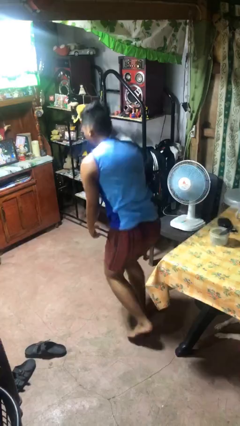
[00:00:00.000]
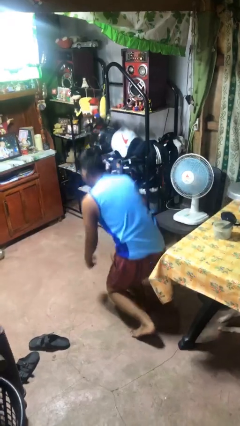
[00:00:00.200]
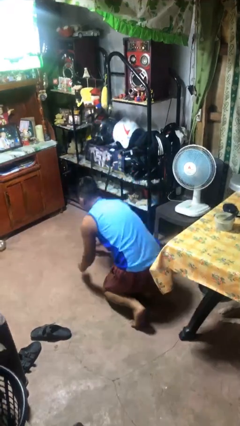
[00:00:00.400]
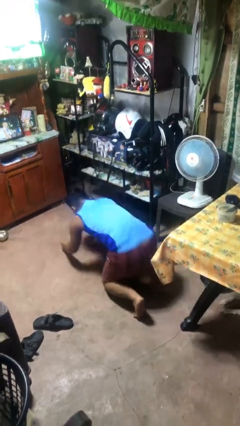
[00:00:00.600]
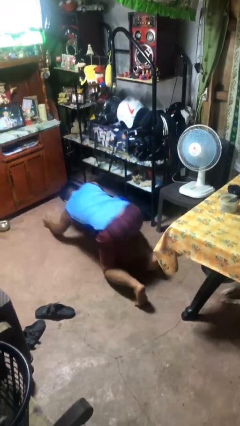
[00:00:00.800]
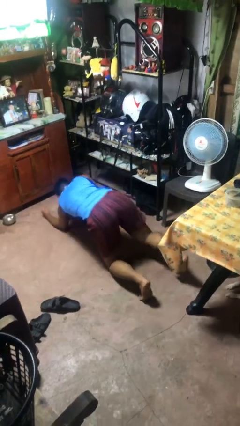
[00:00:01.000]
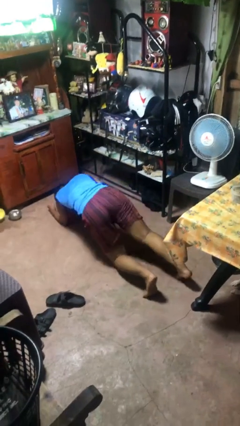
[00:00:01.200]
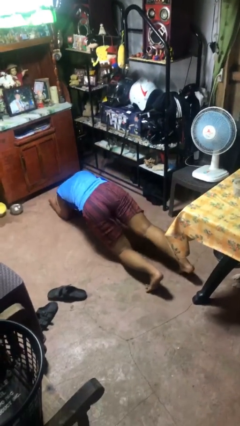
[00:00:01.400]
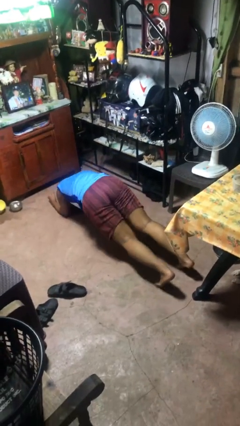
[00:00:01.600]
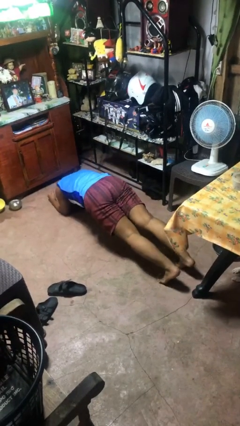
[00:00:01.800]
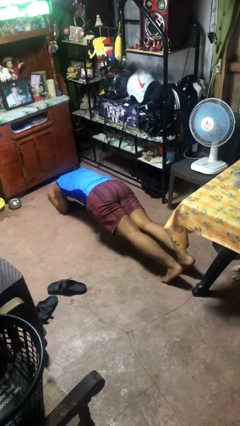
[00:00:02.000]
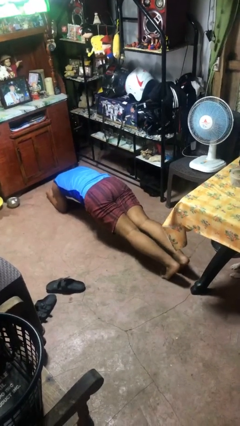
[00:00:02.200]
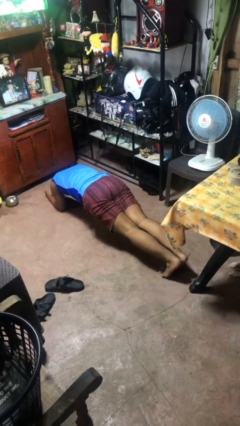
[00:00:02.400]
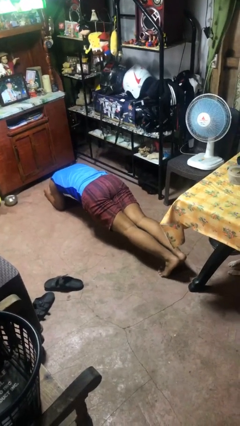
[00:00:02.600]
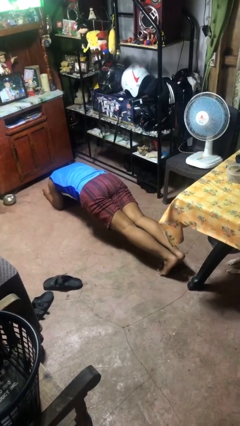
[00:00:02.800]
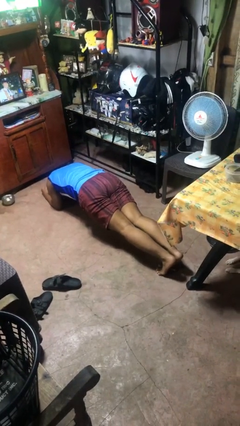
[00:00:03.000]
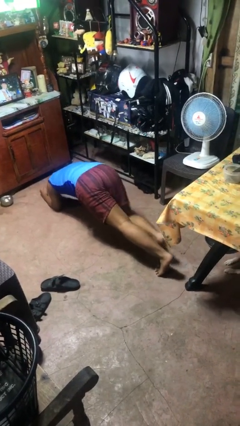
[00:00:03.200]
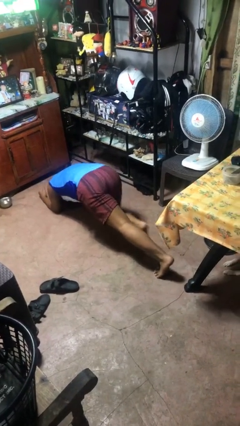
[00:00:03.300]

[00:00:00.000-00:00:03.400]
person exercises with plank

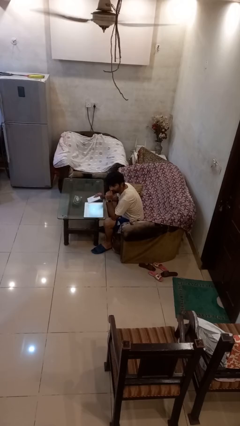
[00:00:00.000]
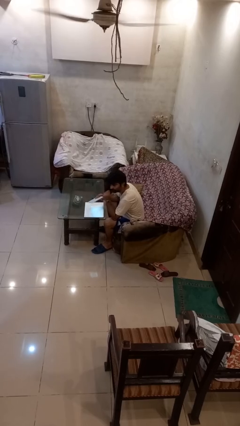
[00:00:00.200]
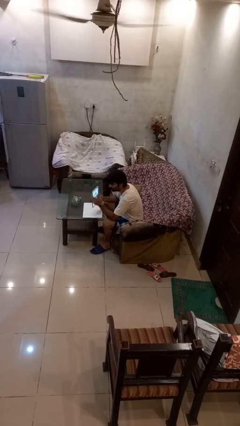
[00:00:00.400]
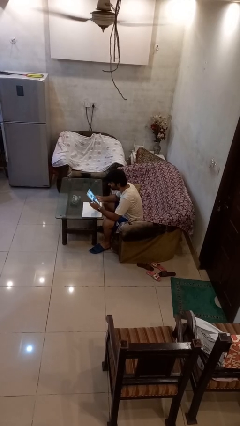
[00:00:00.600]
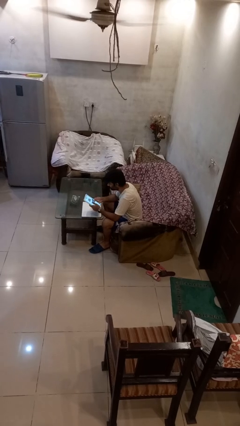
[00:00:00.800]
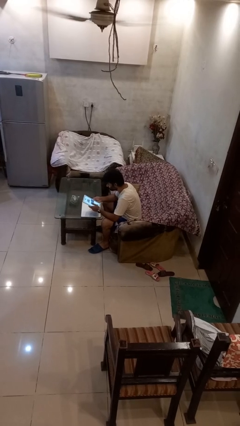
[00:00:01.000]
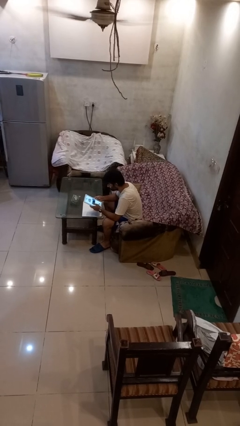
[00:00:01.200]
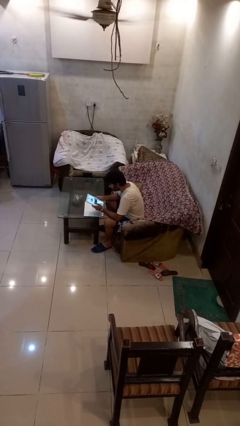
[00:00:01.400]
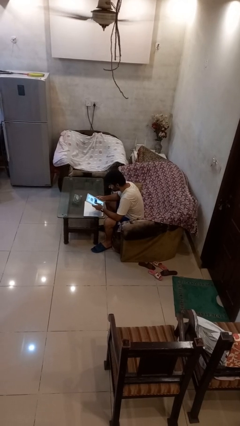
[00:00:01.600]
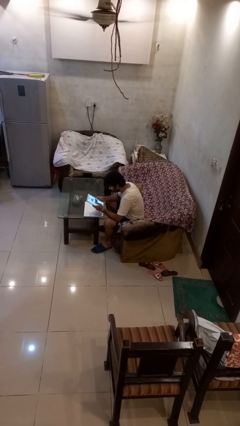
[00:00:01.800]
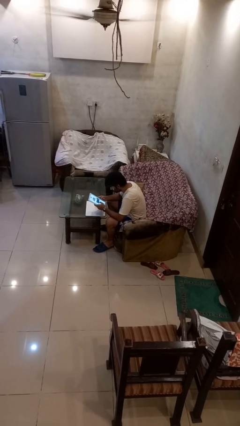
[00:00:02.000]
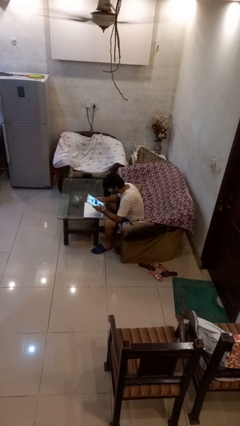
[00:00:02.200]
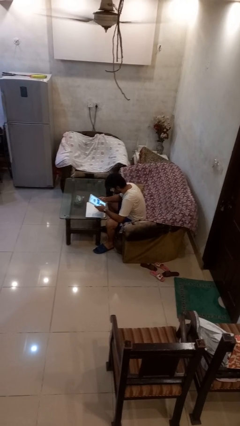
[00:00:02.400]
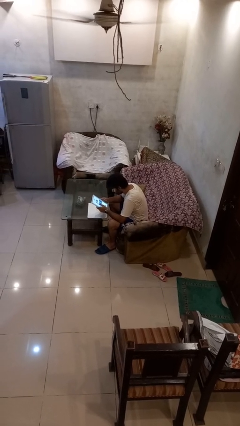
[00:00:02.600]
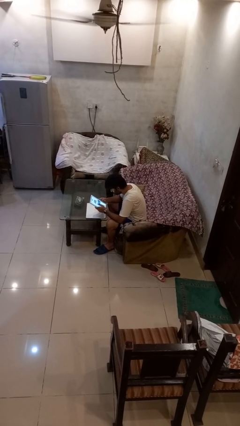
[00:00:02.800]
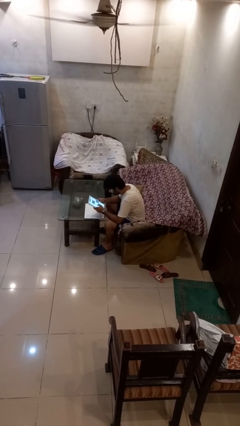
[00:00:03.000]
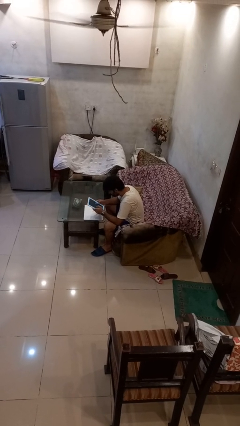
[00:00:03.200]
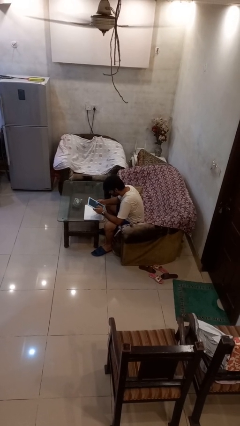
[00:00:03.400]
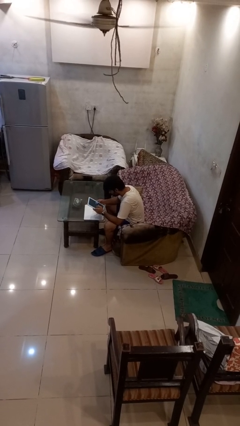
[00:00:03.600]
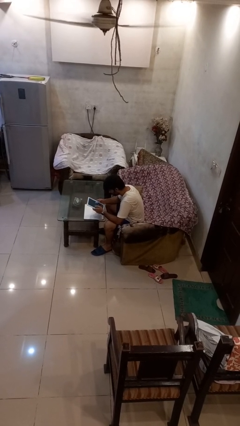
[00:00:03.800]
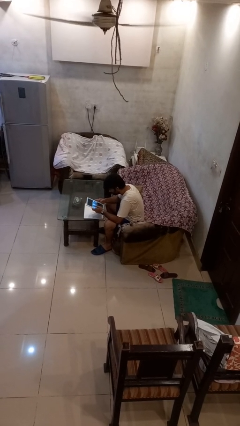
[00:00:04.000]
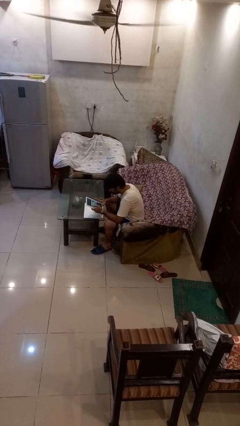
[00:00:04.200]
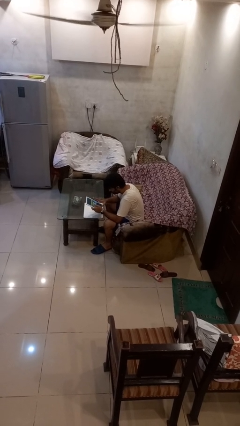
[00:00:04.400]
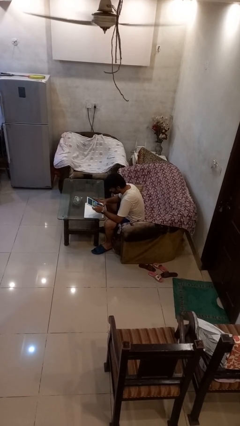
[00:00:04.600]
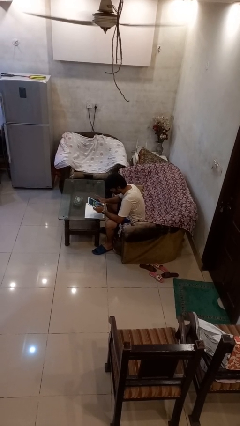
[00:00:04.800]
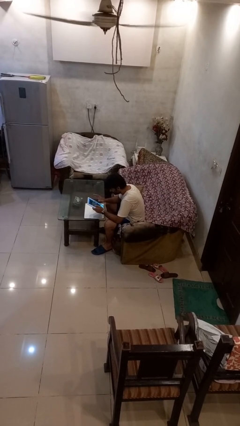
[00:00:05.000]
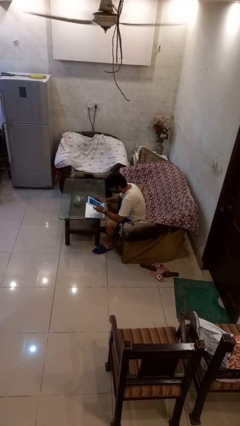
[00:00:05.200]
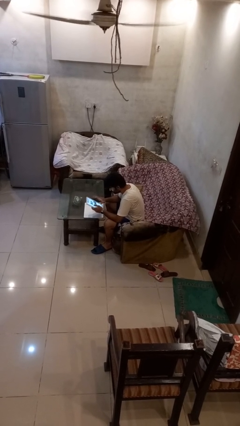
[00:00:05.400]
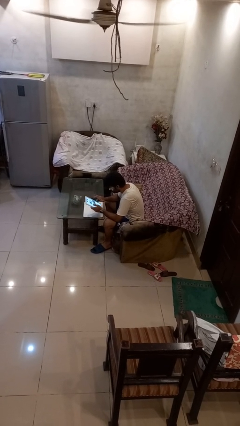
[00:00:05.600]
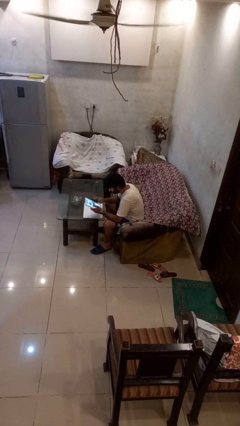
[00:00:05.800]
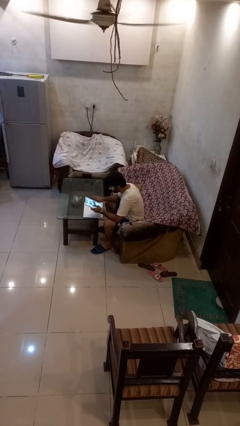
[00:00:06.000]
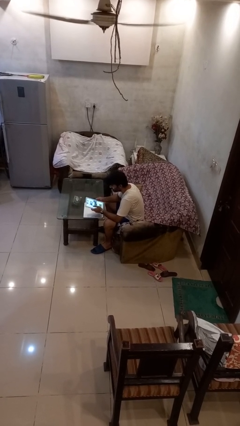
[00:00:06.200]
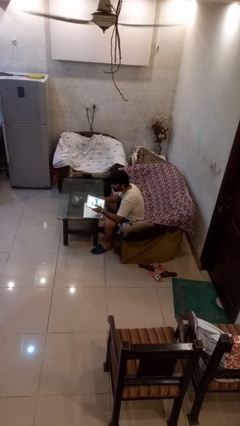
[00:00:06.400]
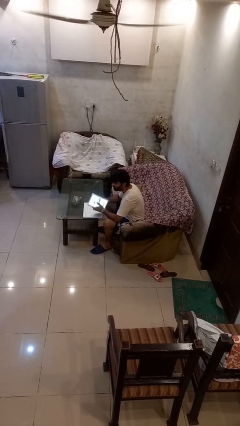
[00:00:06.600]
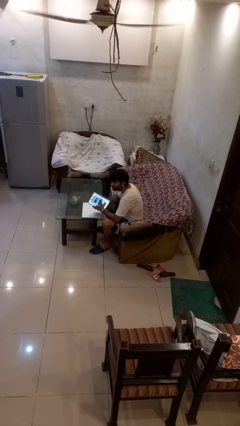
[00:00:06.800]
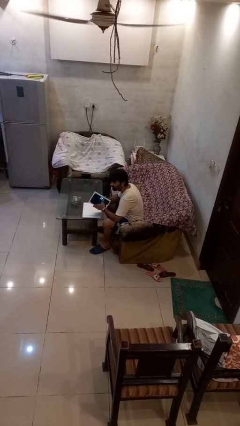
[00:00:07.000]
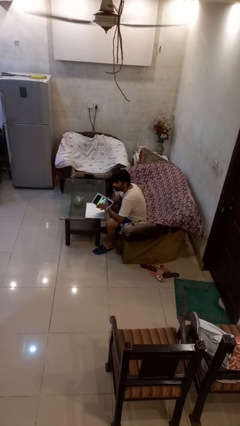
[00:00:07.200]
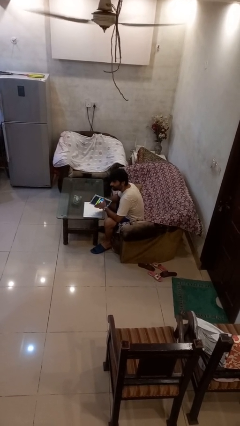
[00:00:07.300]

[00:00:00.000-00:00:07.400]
person interacts with tablet

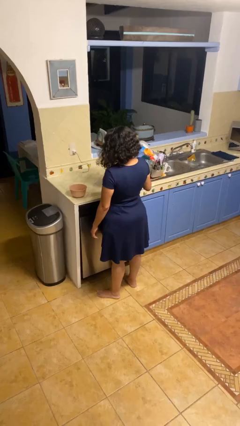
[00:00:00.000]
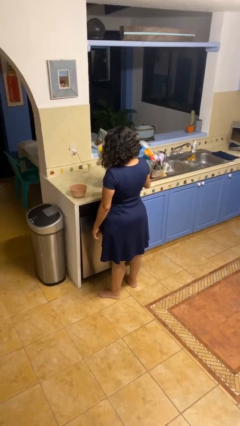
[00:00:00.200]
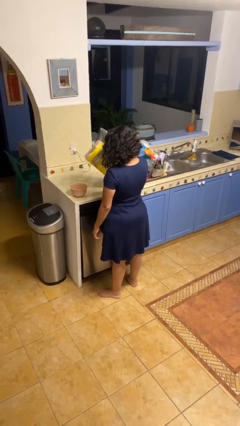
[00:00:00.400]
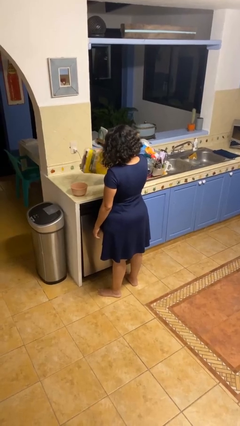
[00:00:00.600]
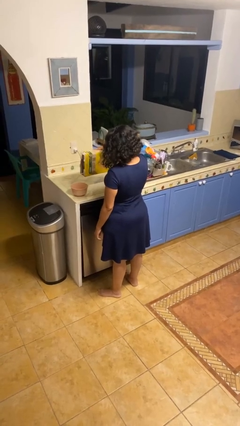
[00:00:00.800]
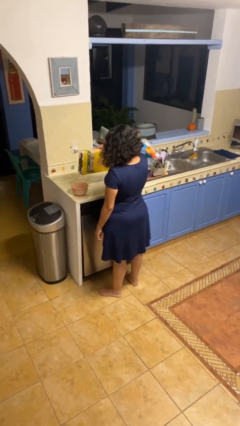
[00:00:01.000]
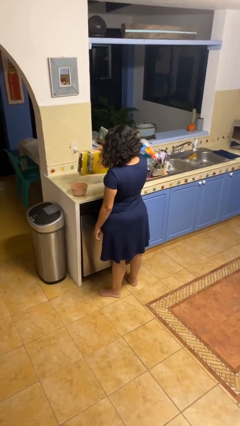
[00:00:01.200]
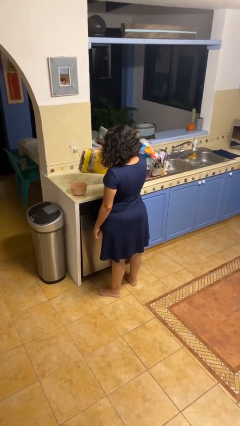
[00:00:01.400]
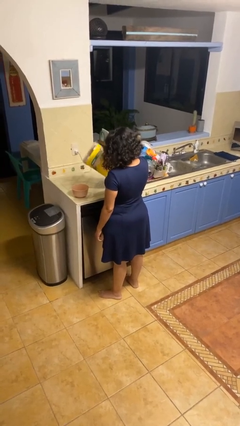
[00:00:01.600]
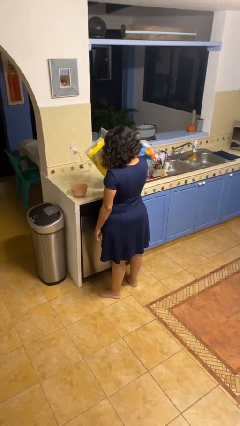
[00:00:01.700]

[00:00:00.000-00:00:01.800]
person pours into bowl

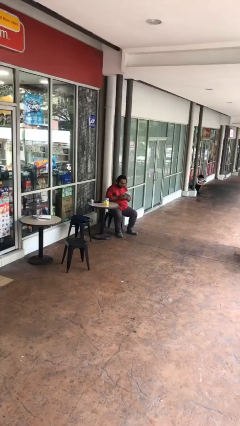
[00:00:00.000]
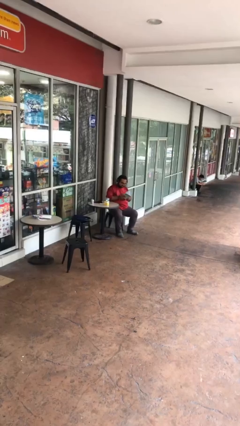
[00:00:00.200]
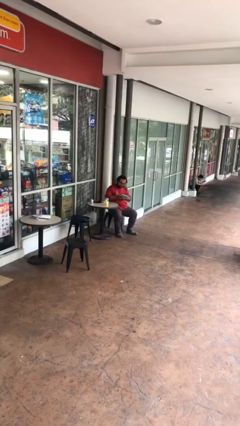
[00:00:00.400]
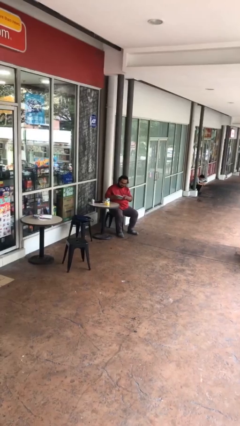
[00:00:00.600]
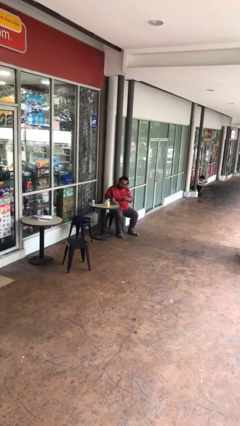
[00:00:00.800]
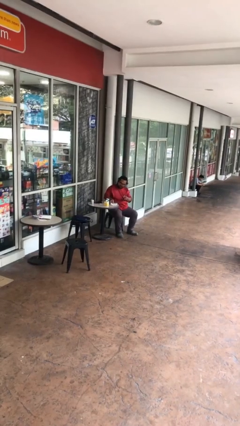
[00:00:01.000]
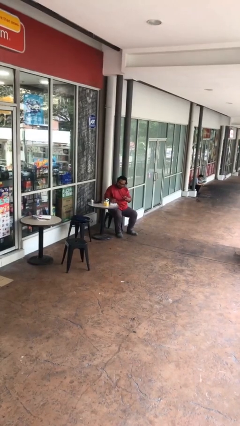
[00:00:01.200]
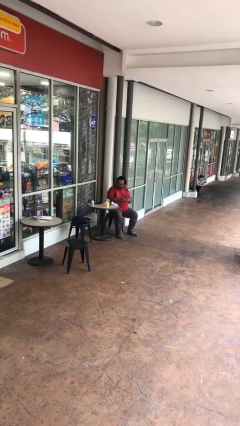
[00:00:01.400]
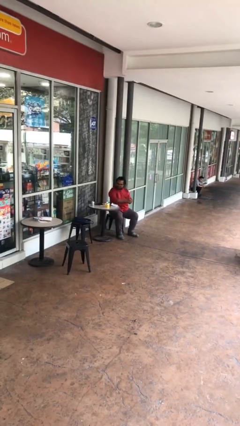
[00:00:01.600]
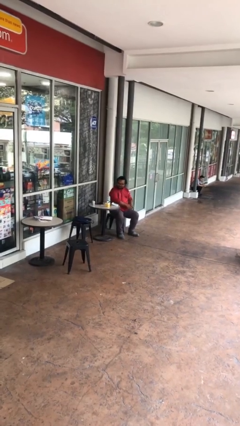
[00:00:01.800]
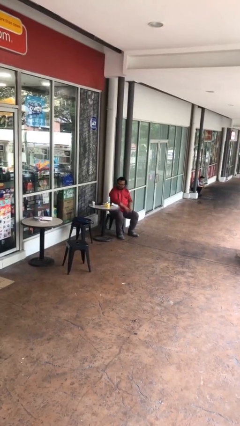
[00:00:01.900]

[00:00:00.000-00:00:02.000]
person puts down object on table

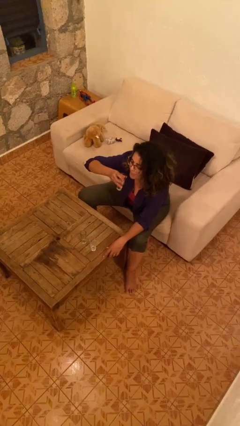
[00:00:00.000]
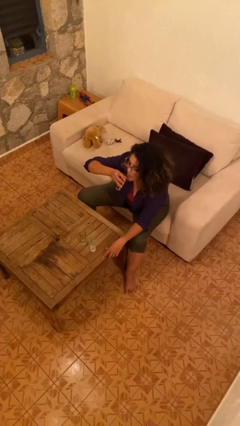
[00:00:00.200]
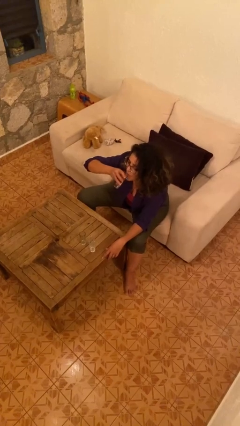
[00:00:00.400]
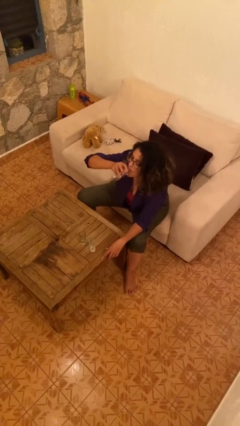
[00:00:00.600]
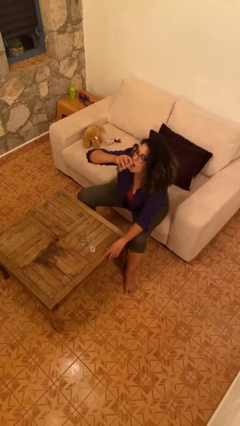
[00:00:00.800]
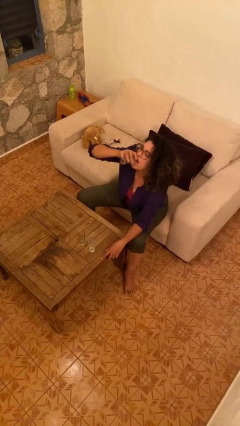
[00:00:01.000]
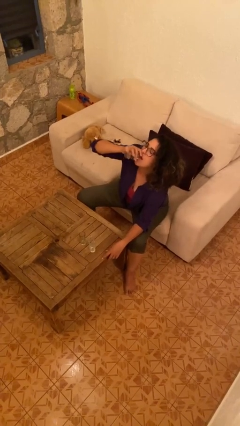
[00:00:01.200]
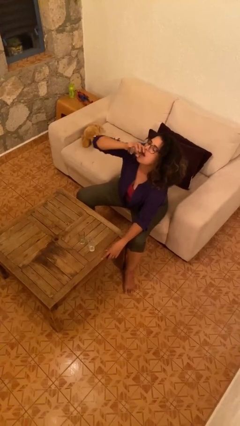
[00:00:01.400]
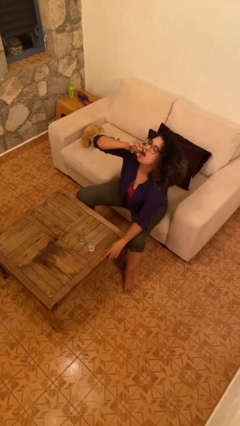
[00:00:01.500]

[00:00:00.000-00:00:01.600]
person drinks from shotglass

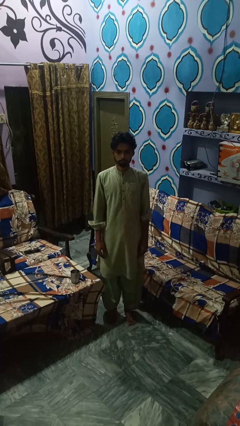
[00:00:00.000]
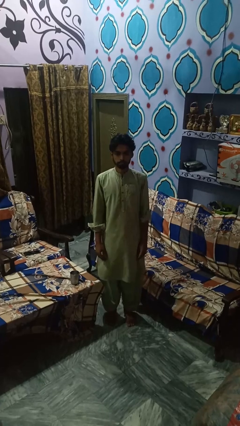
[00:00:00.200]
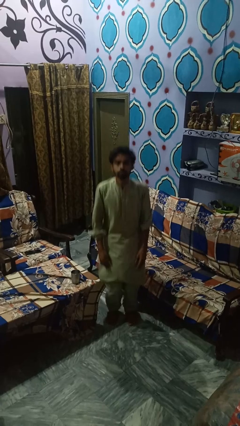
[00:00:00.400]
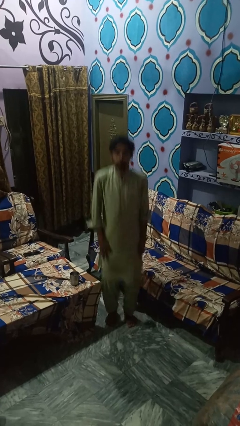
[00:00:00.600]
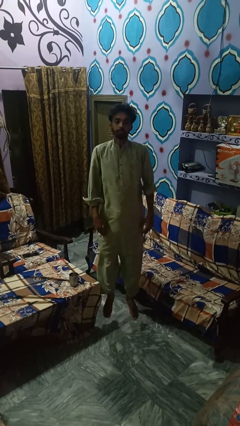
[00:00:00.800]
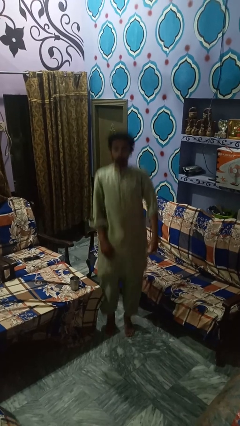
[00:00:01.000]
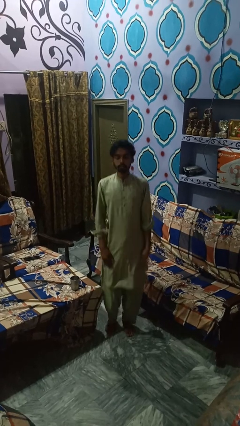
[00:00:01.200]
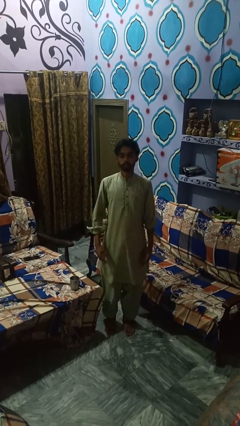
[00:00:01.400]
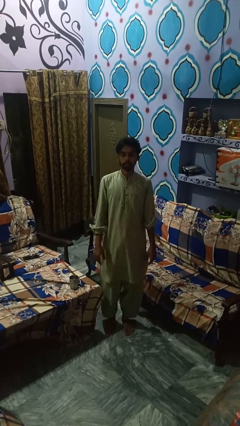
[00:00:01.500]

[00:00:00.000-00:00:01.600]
person jumps
